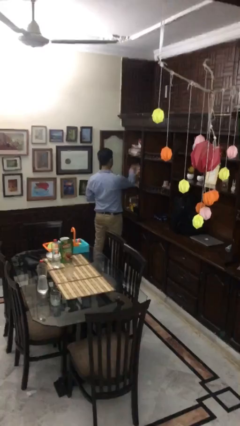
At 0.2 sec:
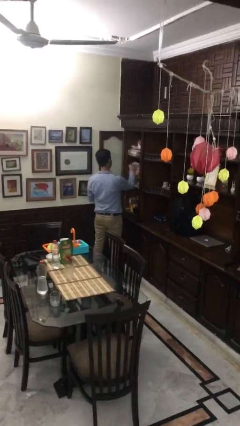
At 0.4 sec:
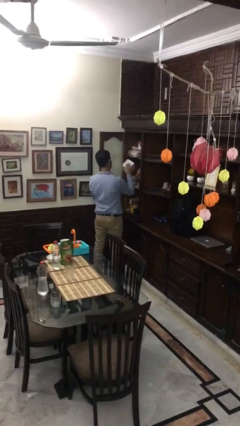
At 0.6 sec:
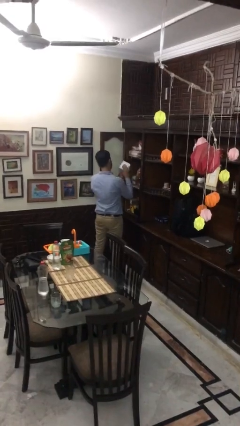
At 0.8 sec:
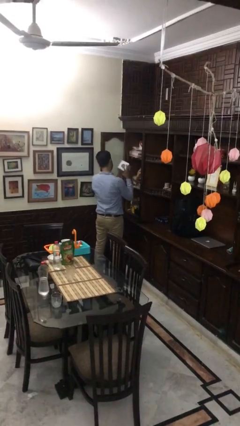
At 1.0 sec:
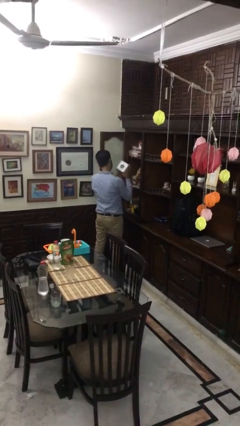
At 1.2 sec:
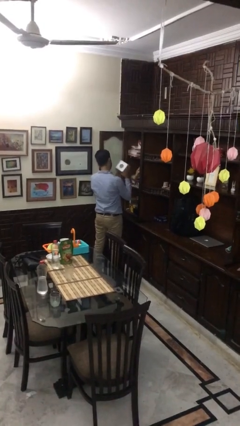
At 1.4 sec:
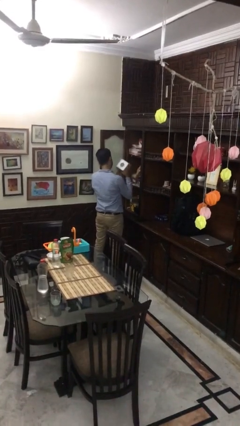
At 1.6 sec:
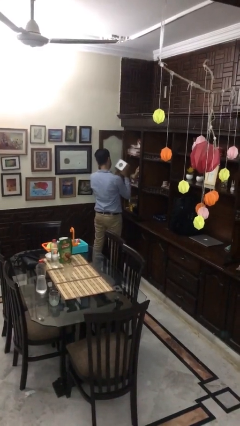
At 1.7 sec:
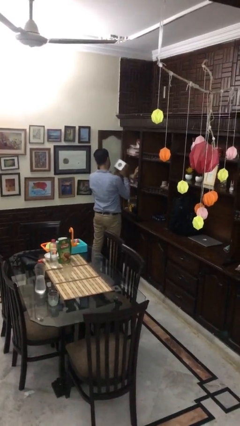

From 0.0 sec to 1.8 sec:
person picks up object from cabinet

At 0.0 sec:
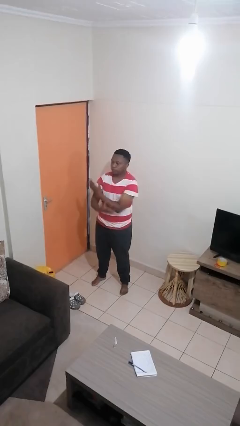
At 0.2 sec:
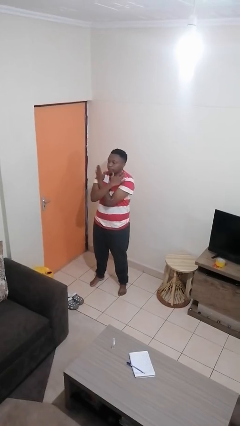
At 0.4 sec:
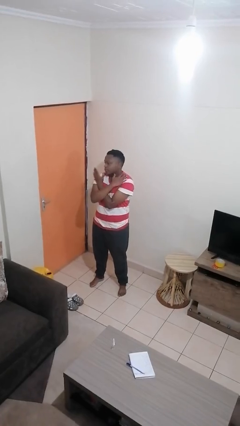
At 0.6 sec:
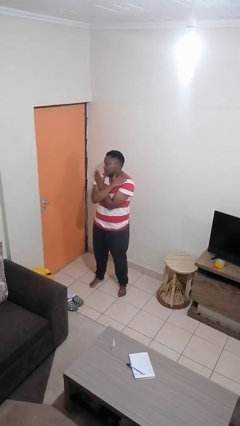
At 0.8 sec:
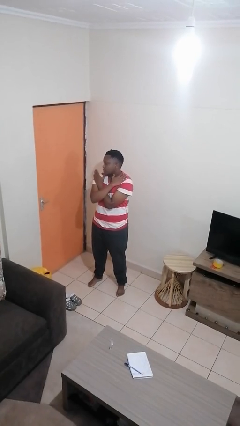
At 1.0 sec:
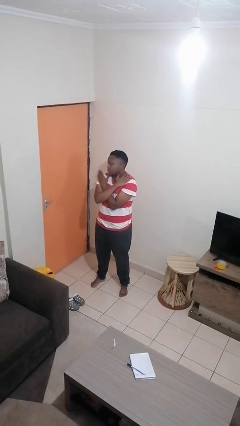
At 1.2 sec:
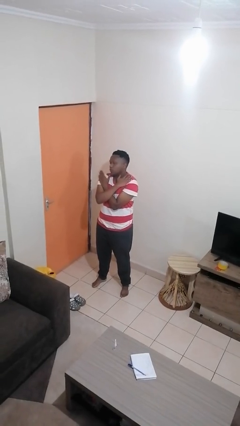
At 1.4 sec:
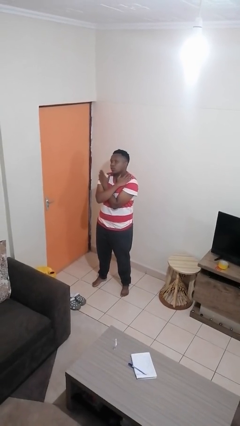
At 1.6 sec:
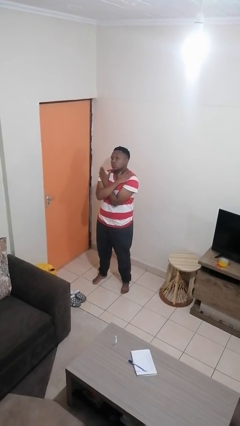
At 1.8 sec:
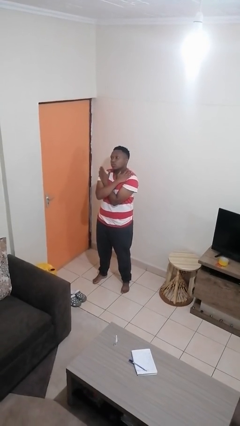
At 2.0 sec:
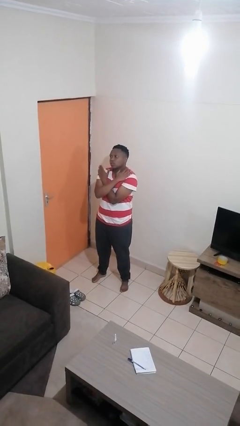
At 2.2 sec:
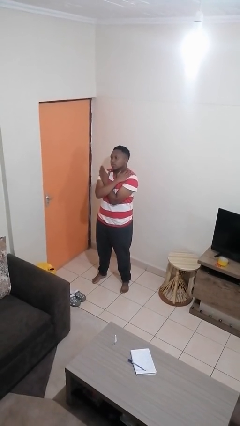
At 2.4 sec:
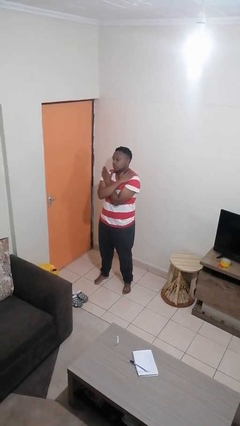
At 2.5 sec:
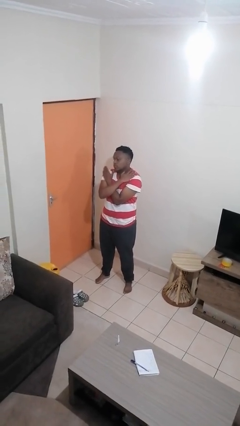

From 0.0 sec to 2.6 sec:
person gestures arms x

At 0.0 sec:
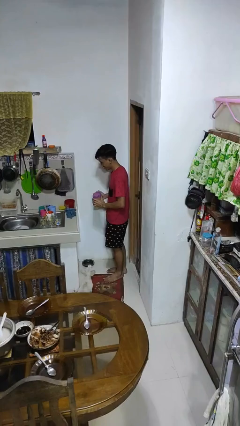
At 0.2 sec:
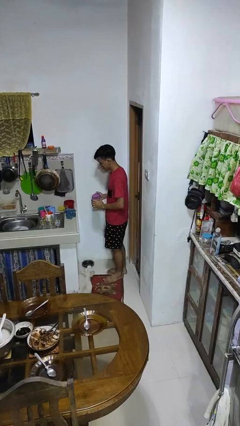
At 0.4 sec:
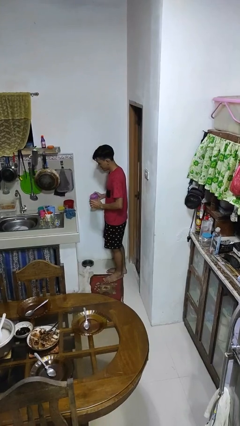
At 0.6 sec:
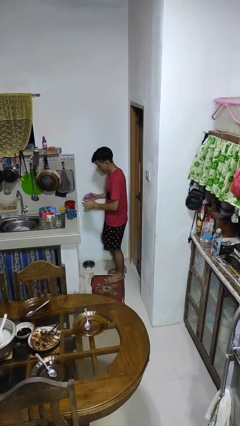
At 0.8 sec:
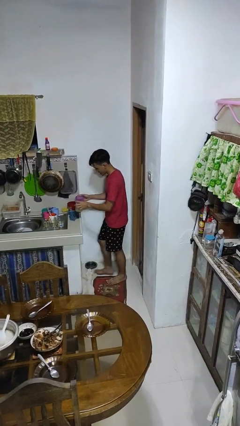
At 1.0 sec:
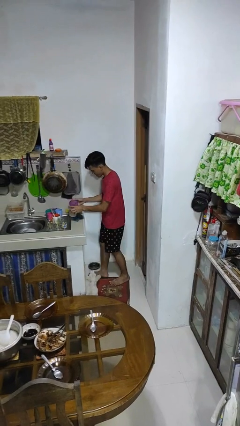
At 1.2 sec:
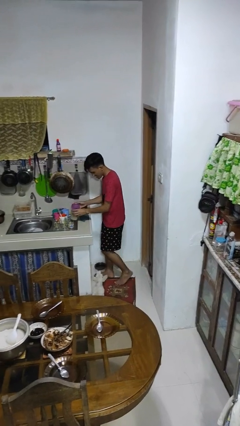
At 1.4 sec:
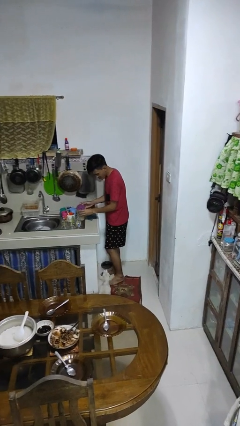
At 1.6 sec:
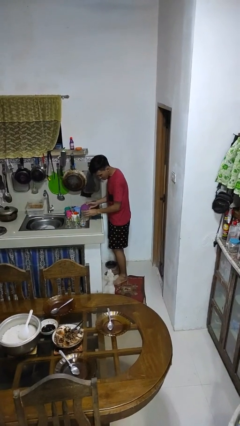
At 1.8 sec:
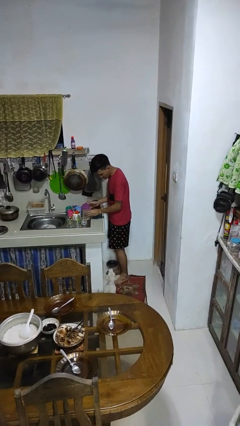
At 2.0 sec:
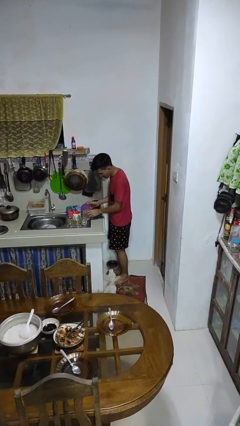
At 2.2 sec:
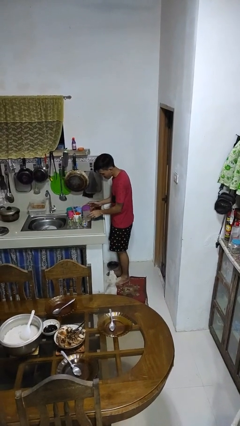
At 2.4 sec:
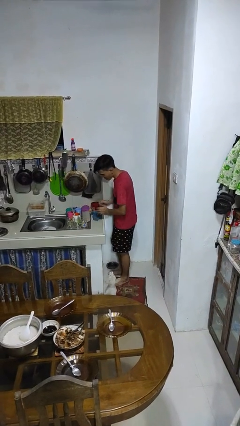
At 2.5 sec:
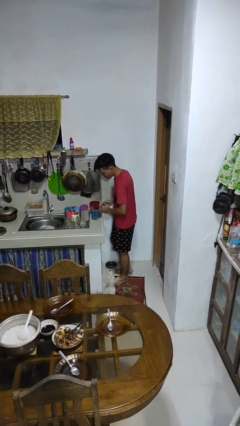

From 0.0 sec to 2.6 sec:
person puts down object on countertop

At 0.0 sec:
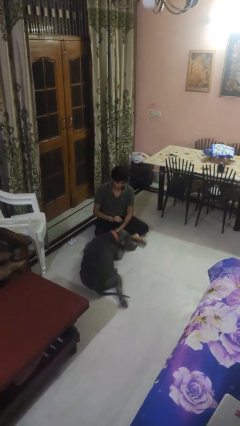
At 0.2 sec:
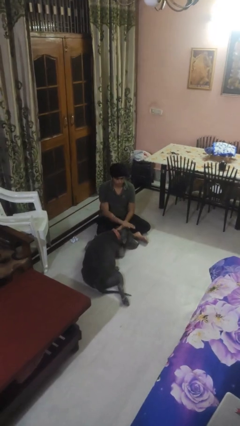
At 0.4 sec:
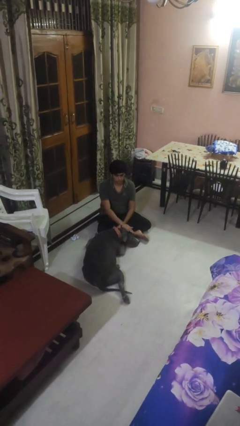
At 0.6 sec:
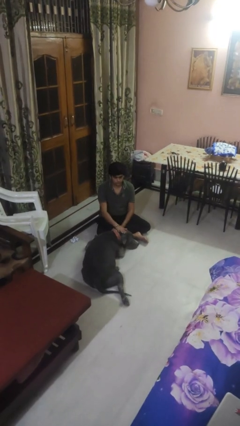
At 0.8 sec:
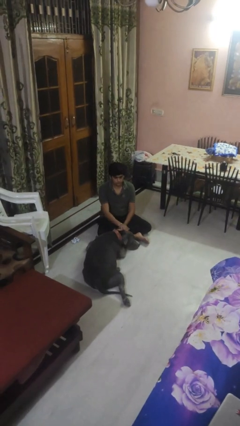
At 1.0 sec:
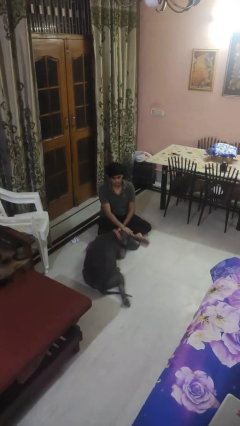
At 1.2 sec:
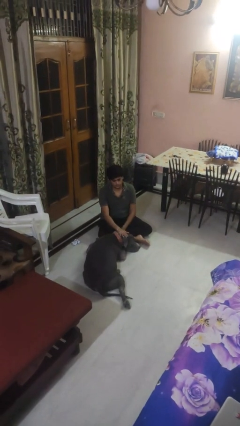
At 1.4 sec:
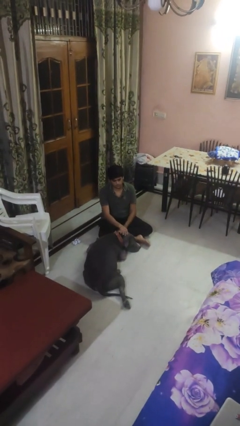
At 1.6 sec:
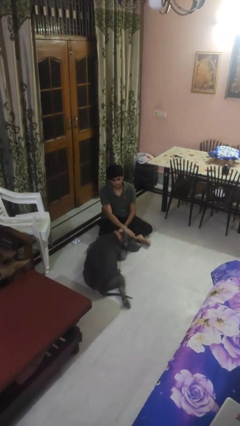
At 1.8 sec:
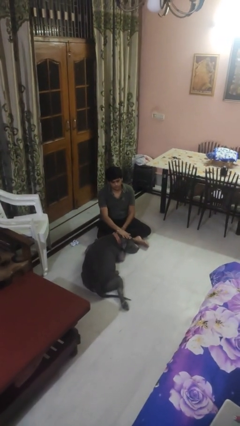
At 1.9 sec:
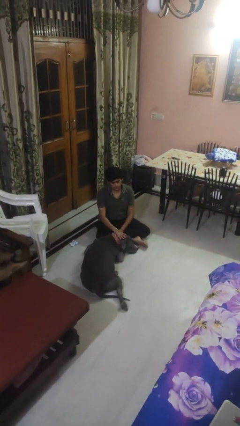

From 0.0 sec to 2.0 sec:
person pets dog

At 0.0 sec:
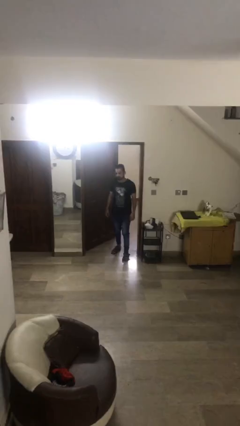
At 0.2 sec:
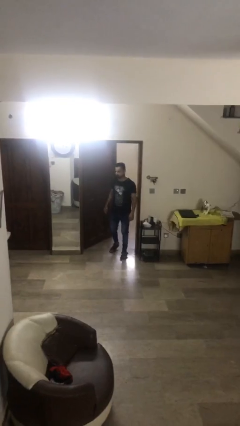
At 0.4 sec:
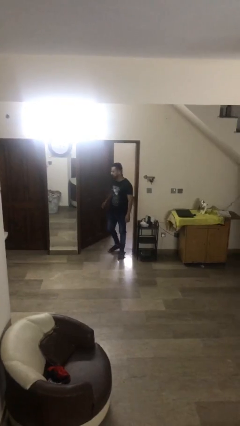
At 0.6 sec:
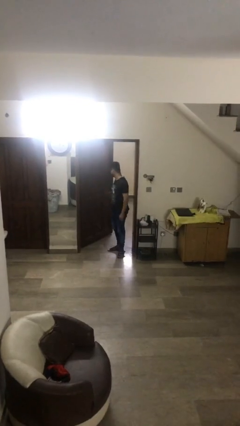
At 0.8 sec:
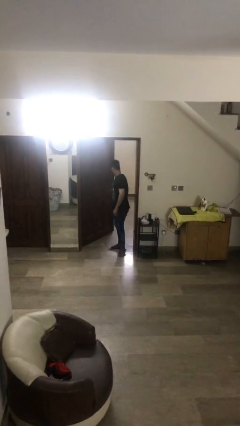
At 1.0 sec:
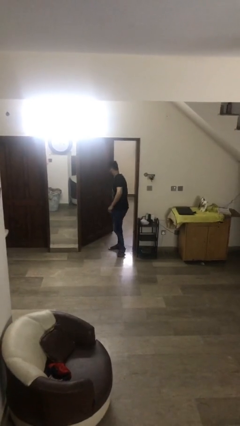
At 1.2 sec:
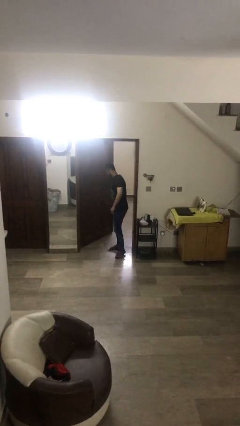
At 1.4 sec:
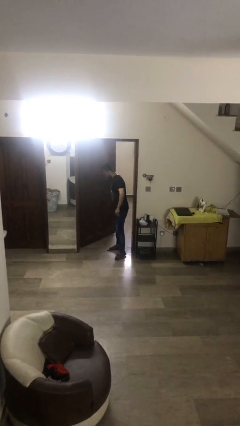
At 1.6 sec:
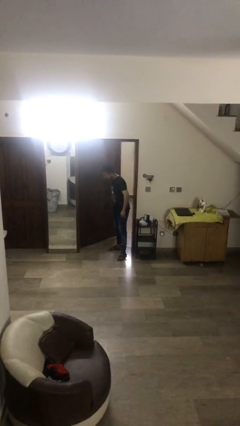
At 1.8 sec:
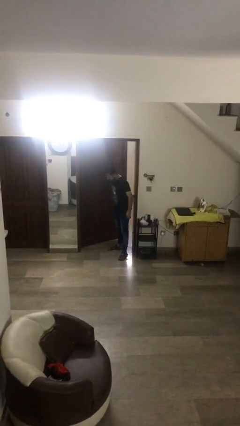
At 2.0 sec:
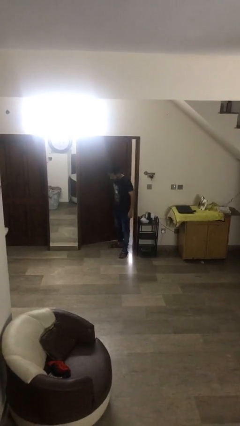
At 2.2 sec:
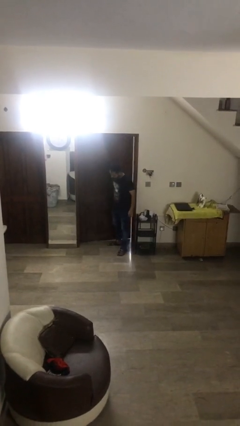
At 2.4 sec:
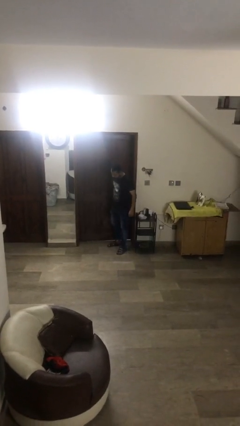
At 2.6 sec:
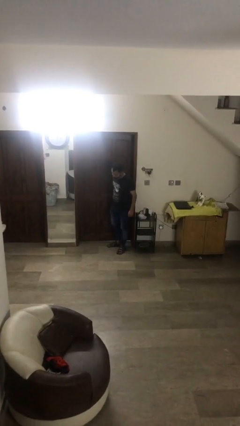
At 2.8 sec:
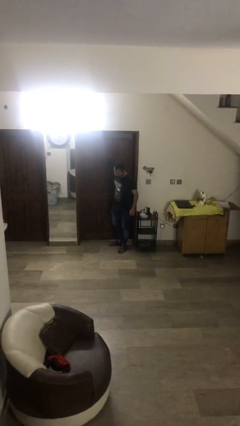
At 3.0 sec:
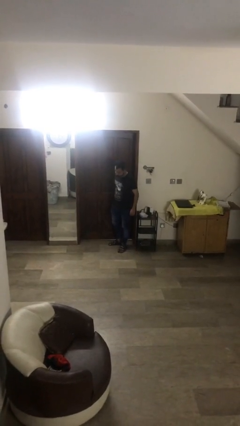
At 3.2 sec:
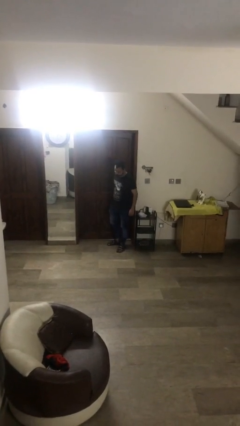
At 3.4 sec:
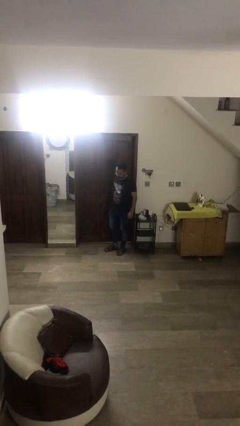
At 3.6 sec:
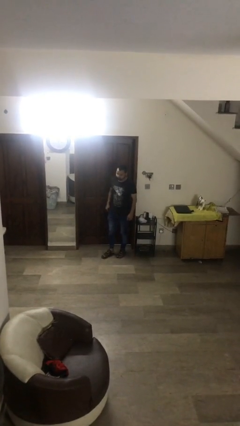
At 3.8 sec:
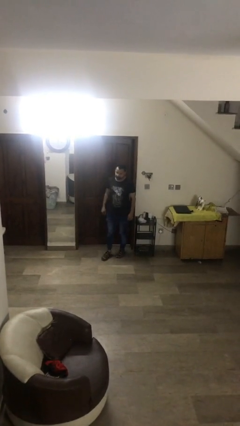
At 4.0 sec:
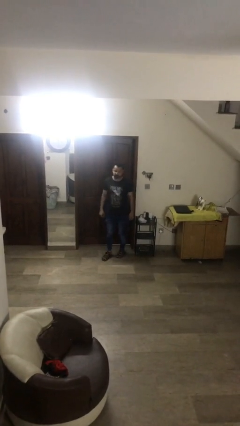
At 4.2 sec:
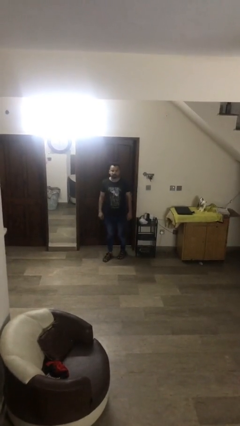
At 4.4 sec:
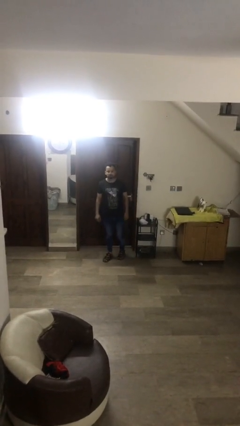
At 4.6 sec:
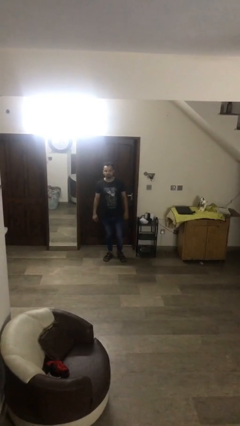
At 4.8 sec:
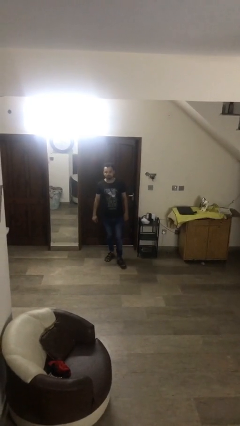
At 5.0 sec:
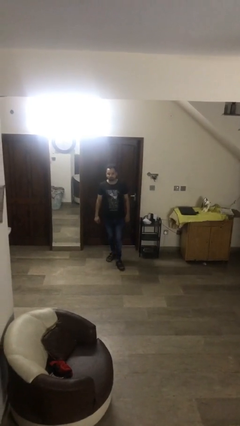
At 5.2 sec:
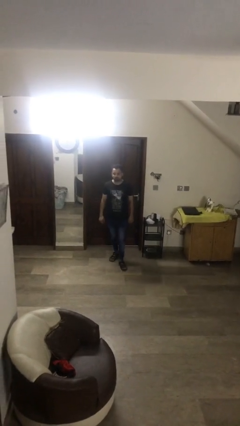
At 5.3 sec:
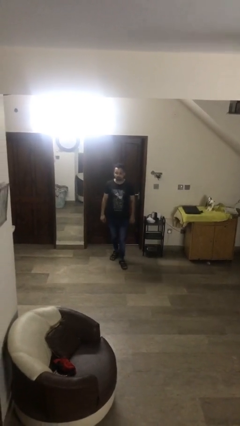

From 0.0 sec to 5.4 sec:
person closes facility door

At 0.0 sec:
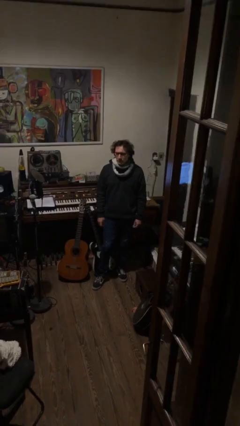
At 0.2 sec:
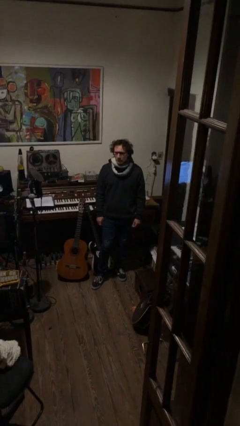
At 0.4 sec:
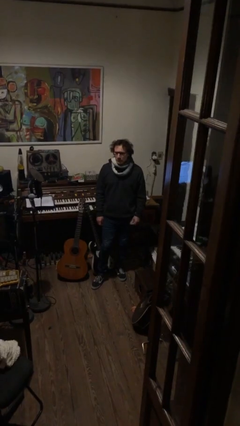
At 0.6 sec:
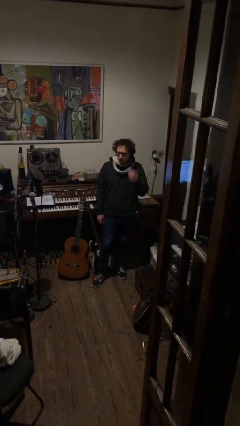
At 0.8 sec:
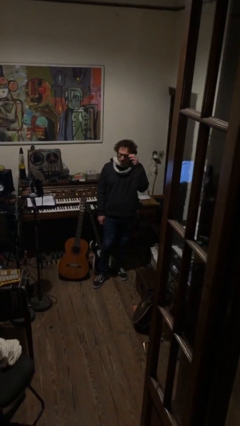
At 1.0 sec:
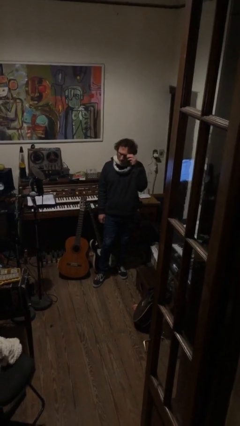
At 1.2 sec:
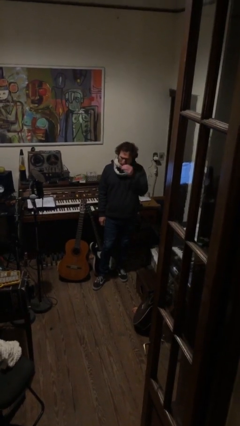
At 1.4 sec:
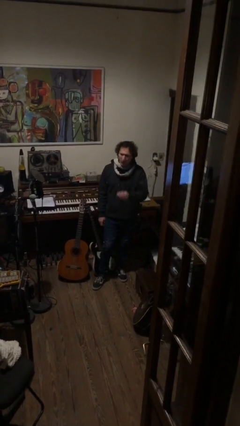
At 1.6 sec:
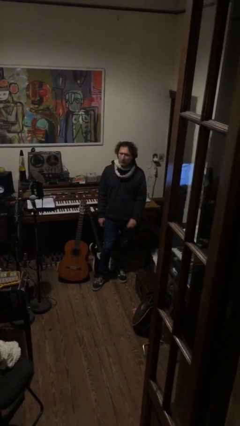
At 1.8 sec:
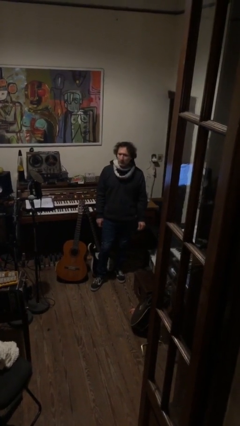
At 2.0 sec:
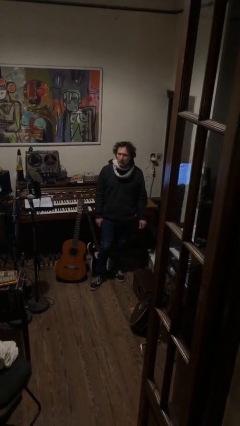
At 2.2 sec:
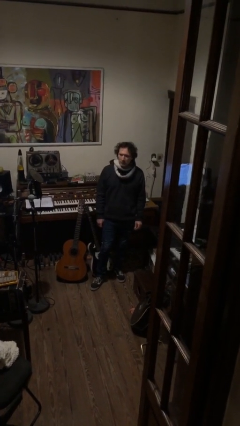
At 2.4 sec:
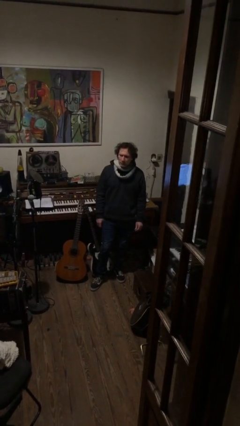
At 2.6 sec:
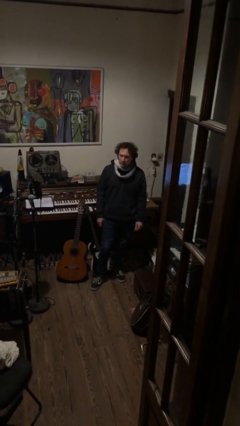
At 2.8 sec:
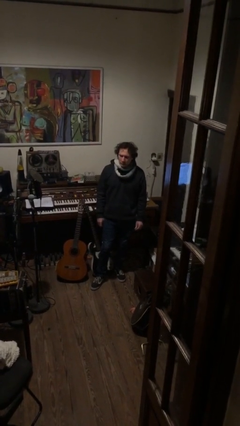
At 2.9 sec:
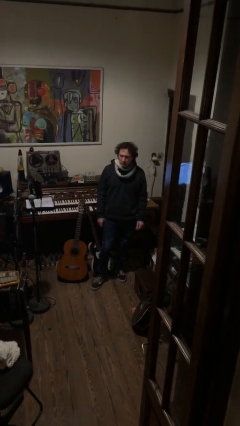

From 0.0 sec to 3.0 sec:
person takes off glasses
